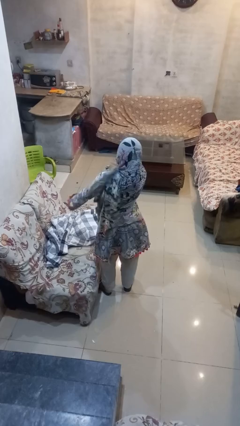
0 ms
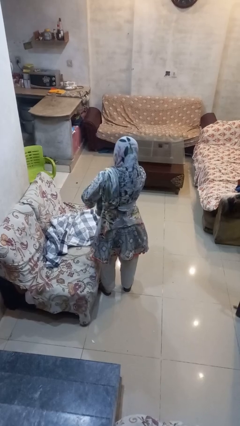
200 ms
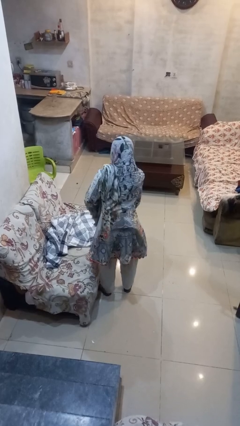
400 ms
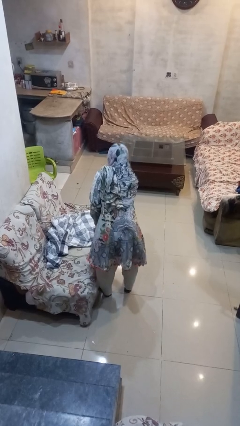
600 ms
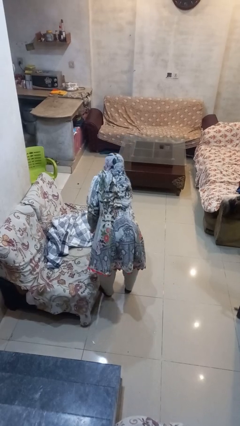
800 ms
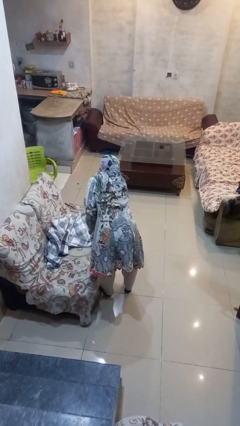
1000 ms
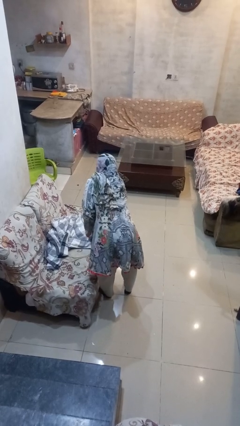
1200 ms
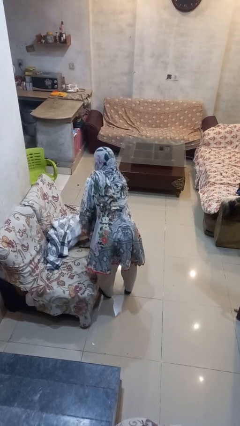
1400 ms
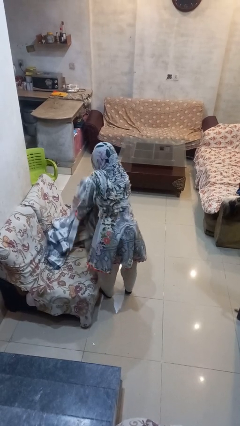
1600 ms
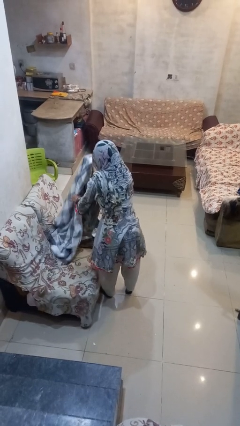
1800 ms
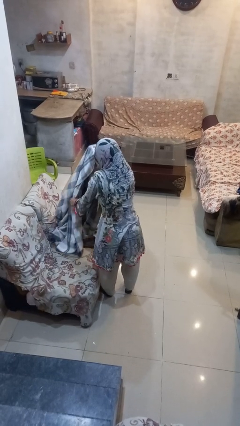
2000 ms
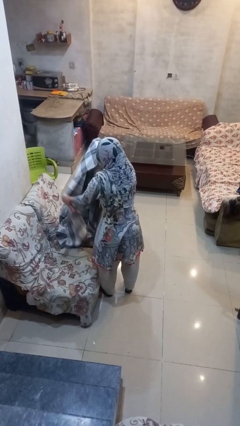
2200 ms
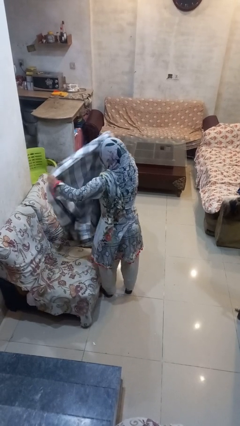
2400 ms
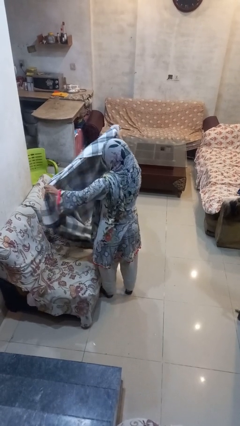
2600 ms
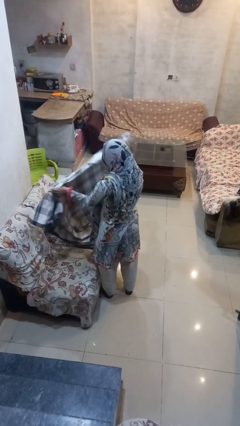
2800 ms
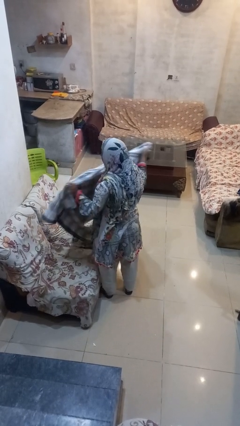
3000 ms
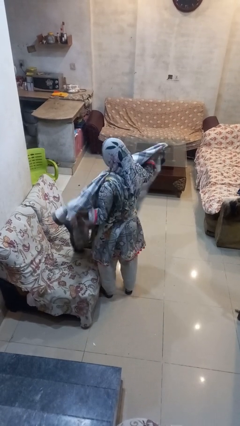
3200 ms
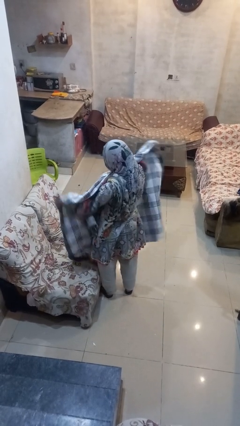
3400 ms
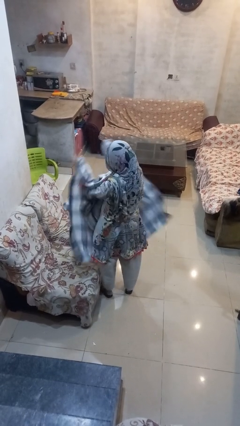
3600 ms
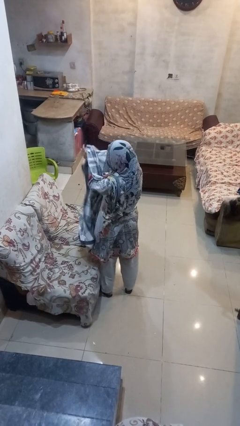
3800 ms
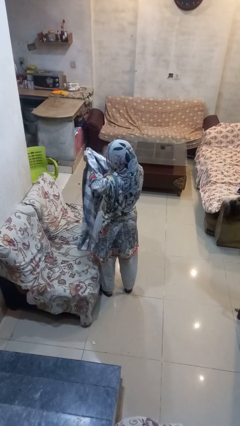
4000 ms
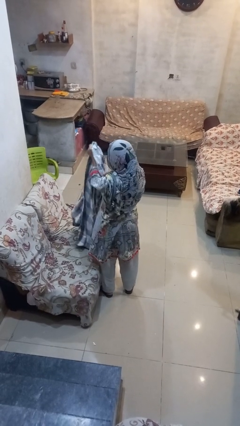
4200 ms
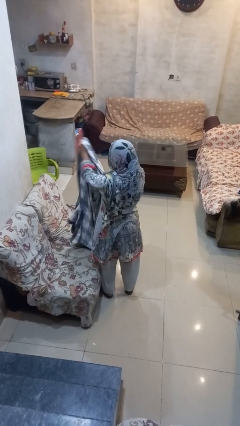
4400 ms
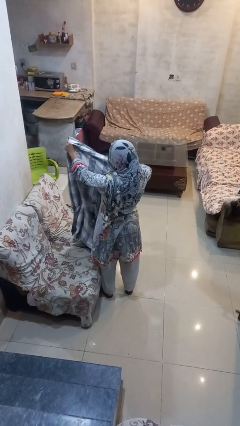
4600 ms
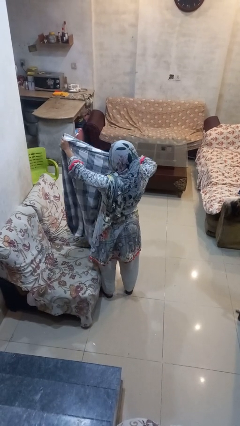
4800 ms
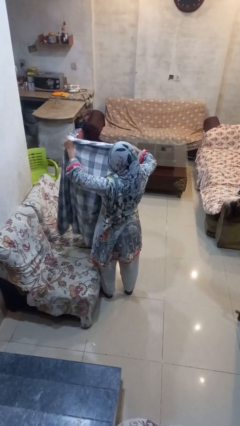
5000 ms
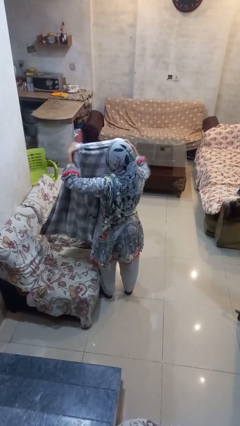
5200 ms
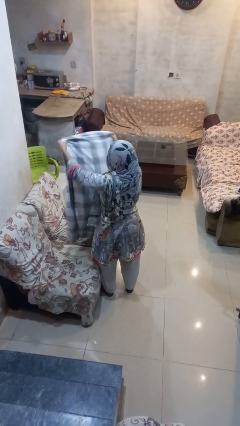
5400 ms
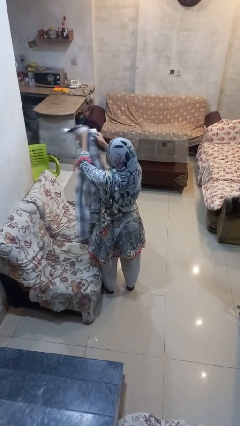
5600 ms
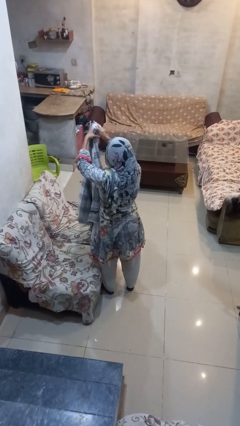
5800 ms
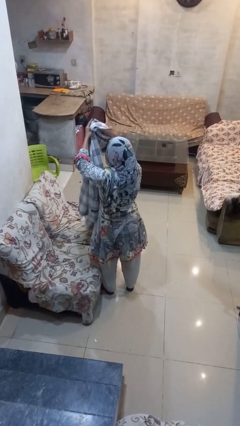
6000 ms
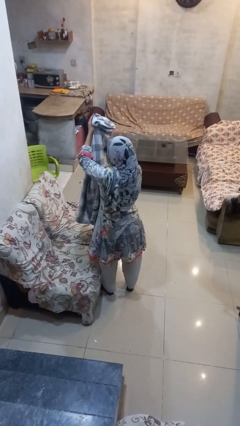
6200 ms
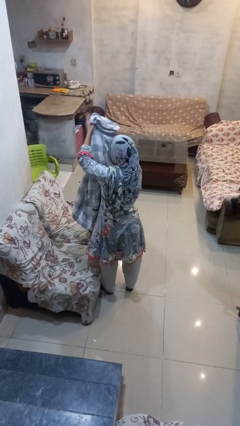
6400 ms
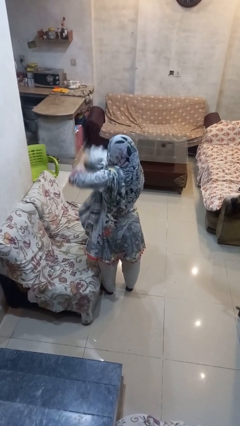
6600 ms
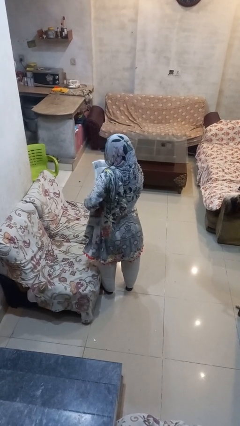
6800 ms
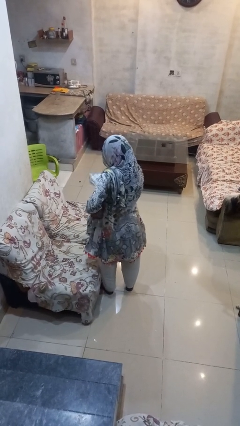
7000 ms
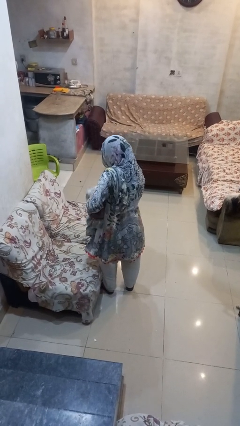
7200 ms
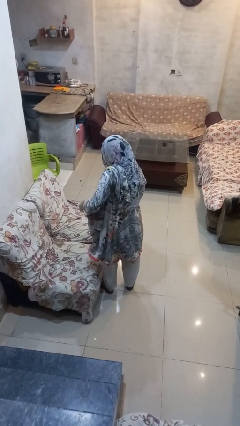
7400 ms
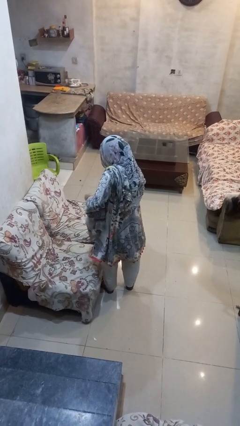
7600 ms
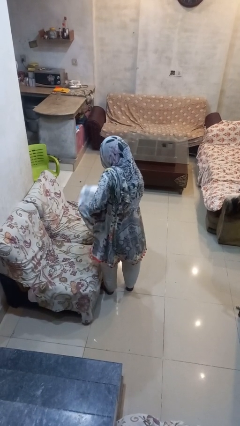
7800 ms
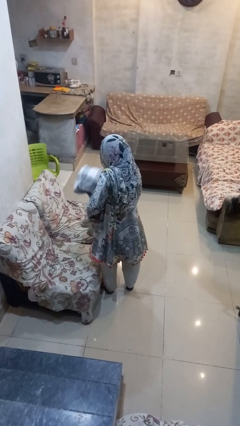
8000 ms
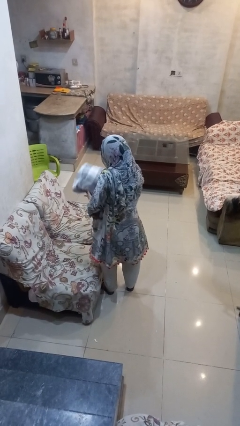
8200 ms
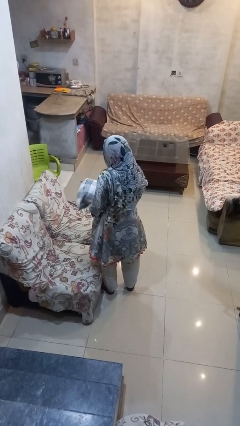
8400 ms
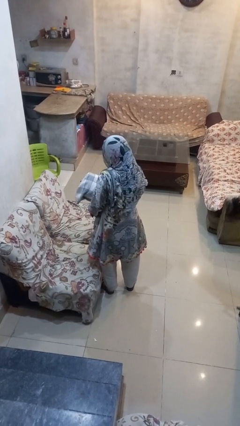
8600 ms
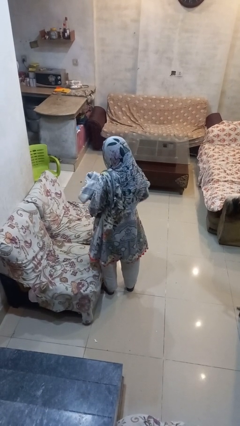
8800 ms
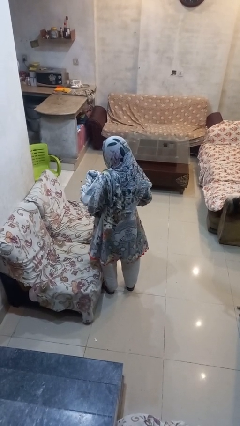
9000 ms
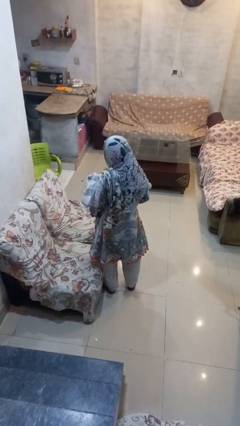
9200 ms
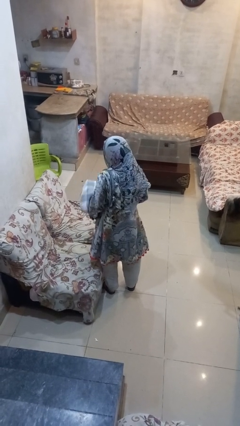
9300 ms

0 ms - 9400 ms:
person folds blanket

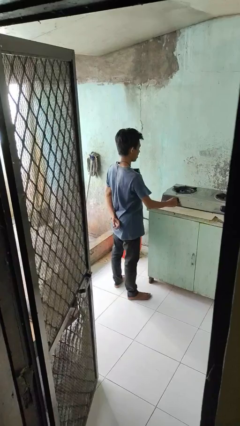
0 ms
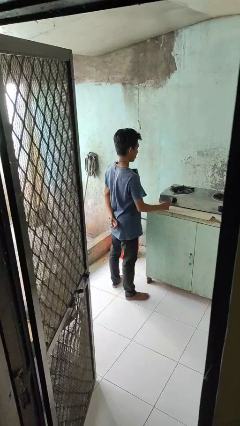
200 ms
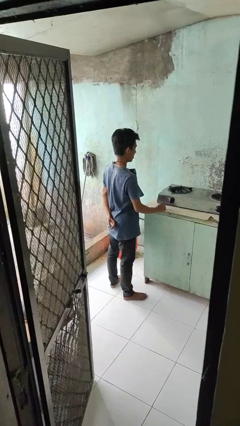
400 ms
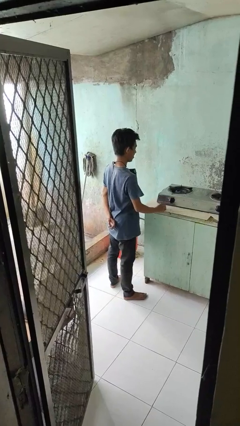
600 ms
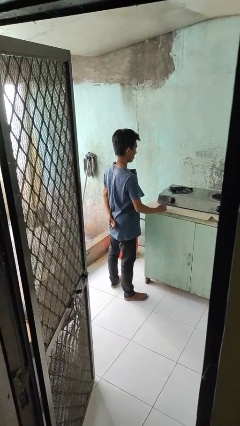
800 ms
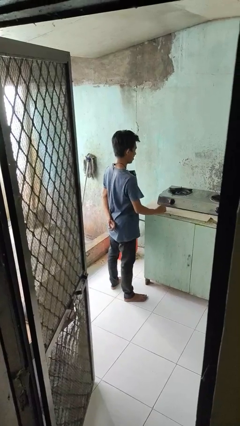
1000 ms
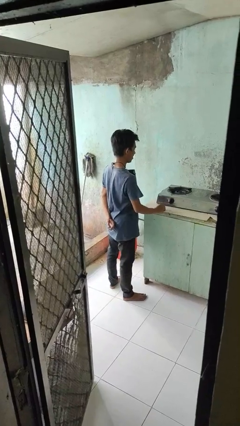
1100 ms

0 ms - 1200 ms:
person turns off stovetop

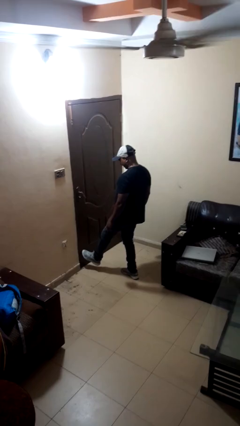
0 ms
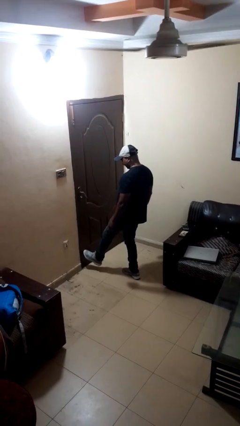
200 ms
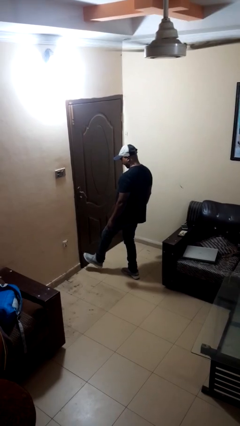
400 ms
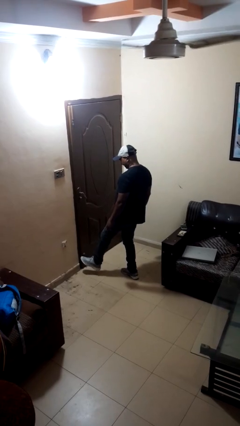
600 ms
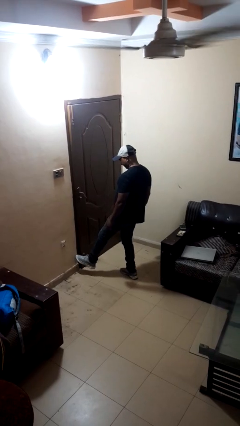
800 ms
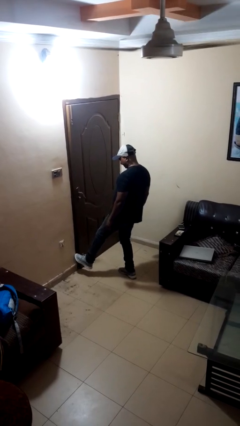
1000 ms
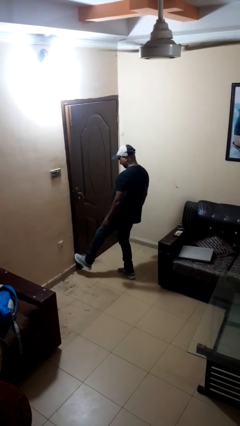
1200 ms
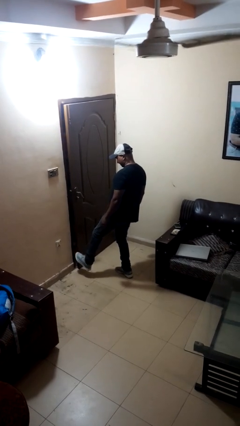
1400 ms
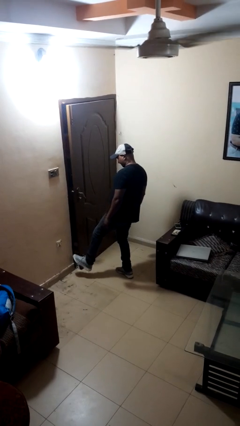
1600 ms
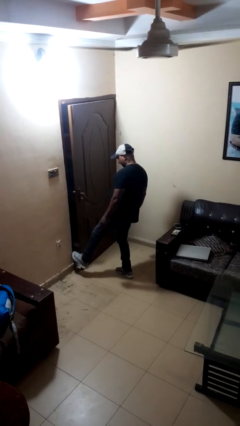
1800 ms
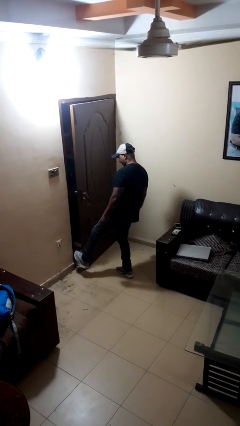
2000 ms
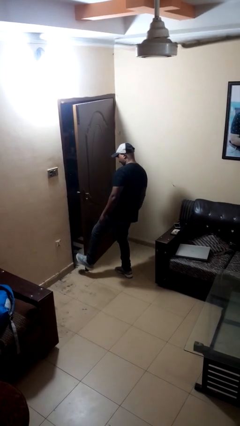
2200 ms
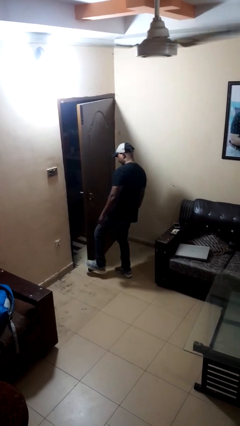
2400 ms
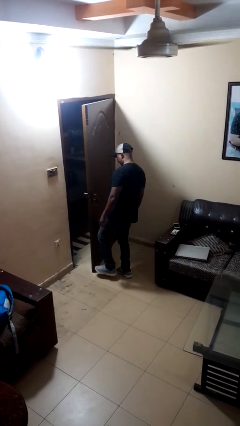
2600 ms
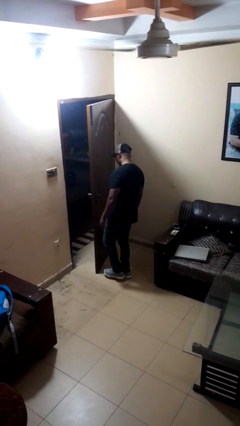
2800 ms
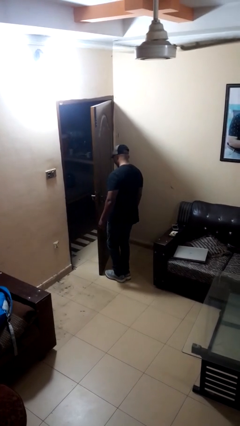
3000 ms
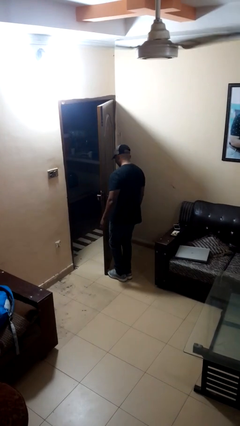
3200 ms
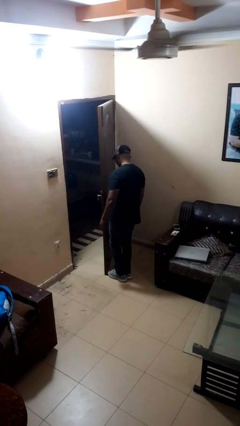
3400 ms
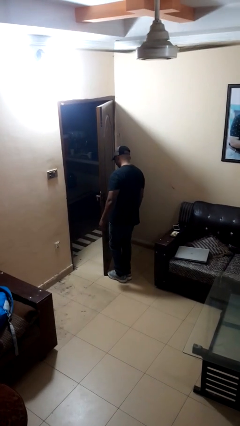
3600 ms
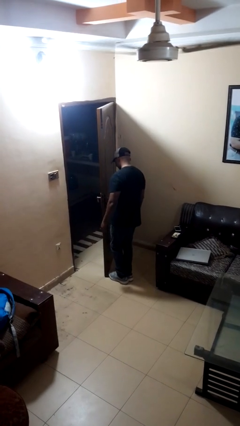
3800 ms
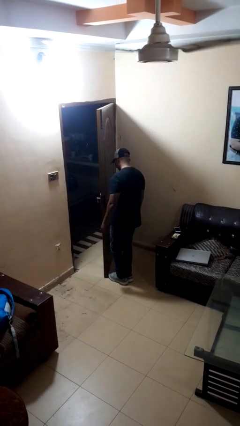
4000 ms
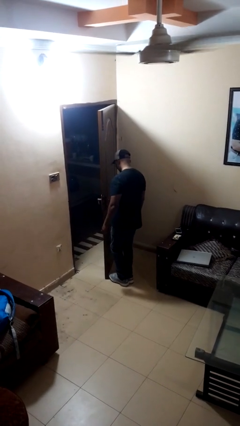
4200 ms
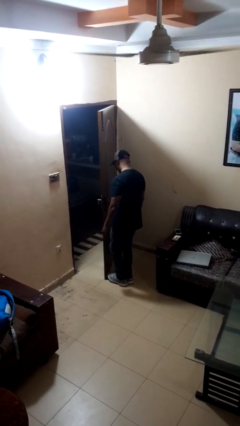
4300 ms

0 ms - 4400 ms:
person opens facility door

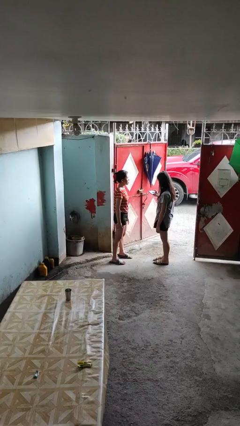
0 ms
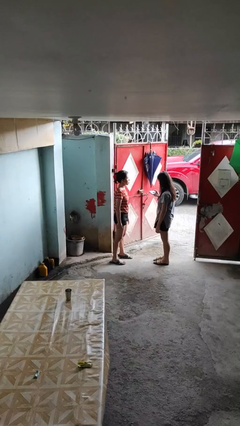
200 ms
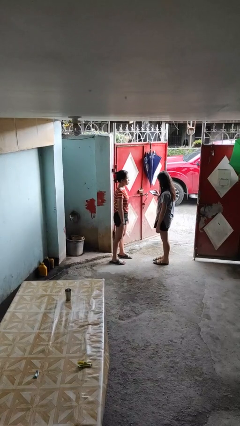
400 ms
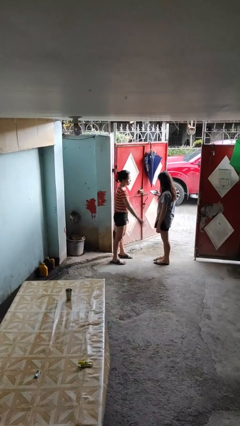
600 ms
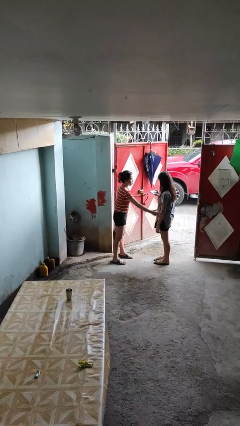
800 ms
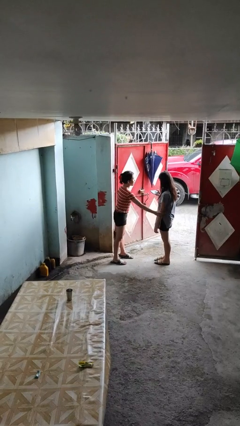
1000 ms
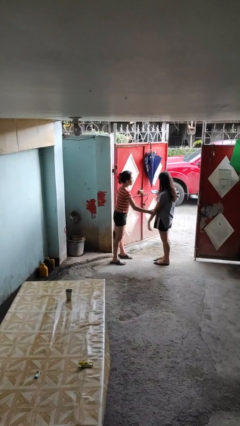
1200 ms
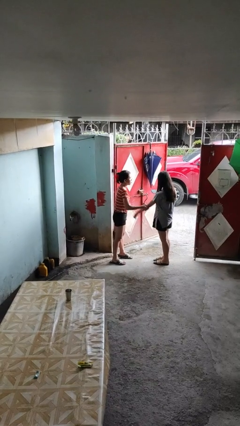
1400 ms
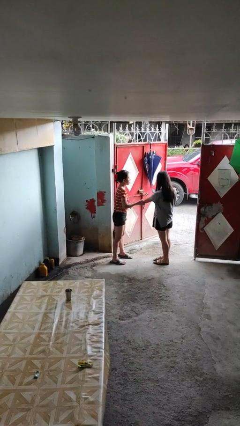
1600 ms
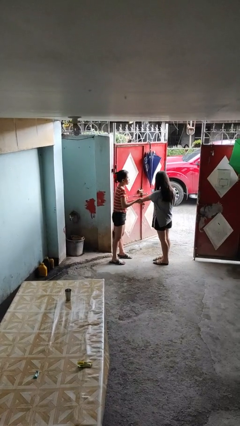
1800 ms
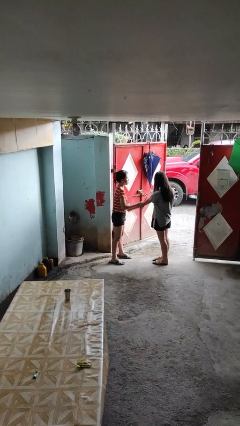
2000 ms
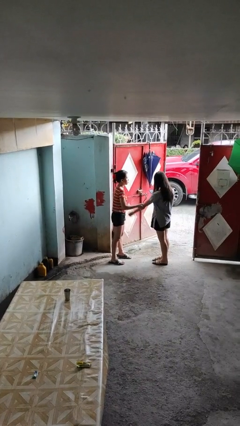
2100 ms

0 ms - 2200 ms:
person grabs person by forearm

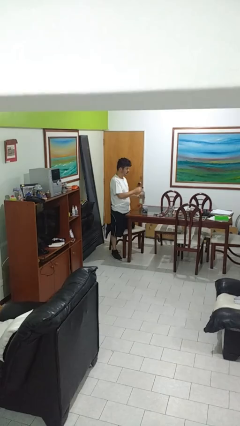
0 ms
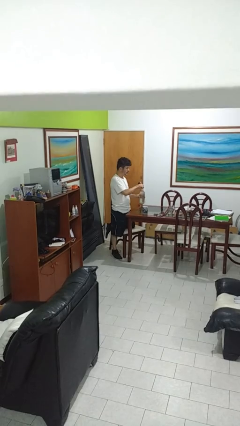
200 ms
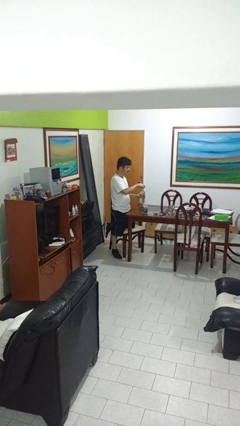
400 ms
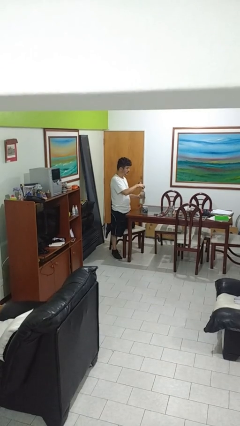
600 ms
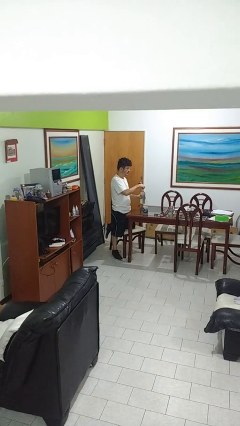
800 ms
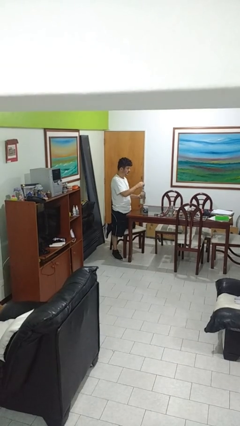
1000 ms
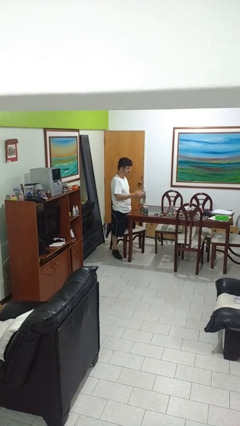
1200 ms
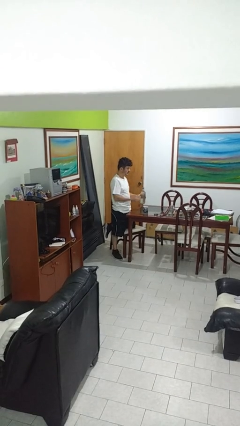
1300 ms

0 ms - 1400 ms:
person unscrews lid from bottle
